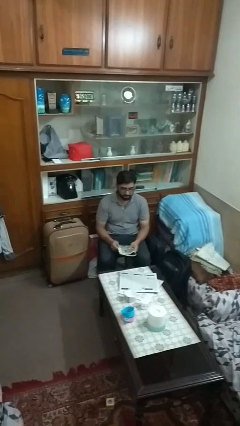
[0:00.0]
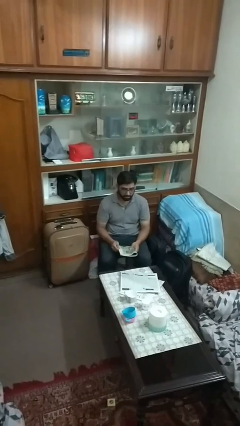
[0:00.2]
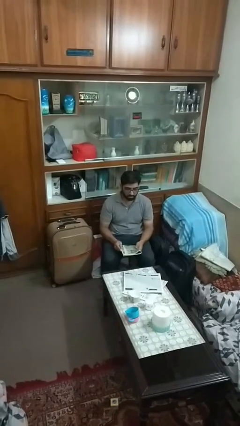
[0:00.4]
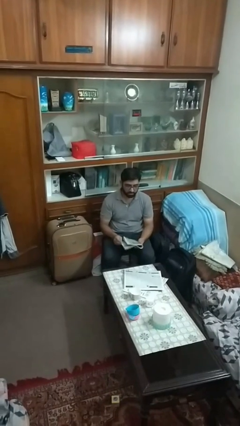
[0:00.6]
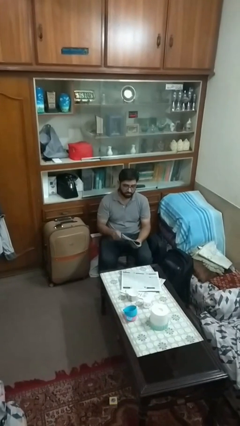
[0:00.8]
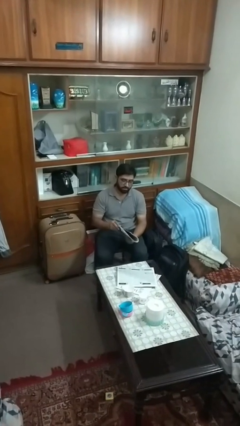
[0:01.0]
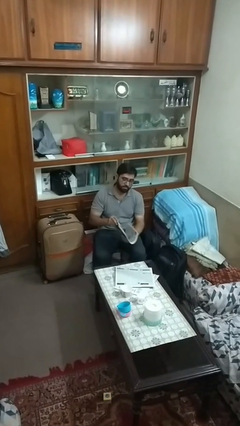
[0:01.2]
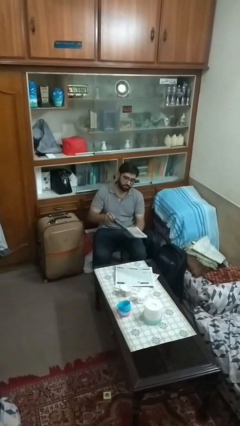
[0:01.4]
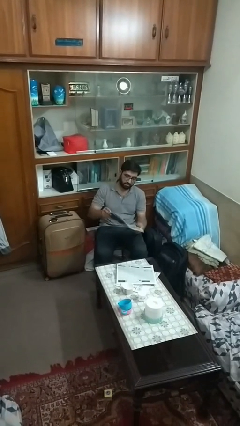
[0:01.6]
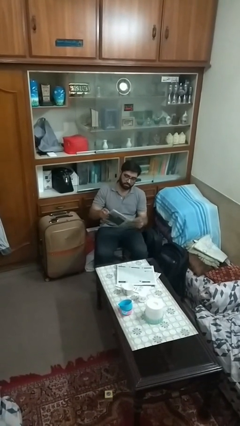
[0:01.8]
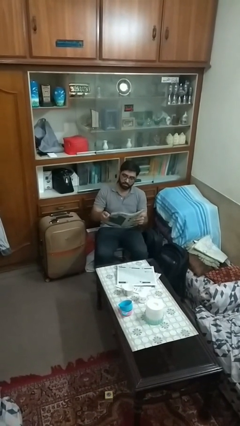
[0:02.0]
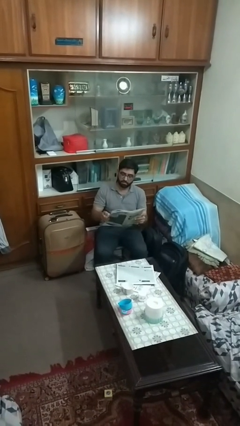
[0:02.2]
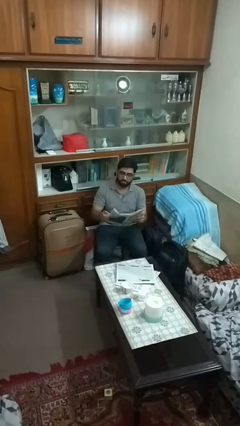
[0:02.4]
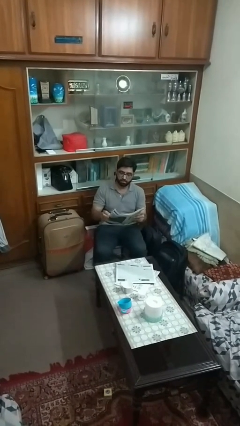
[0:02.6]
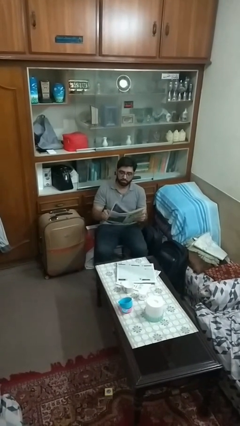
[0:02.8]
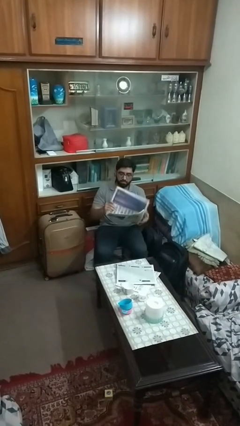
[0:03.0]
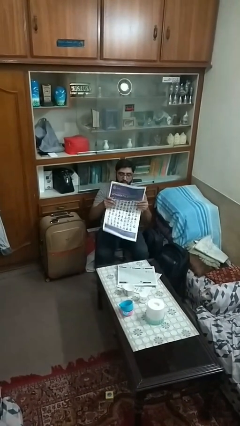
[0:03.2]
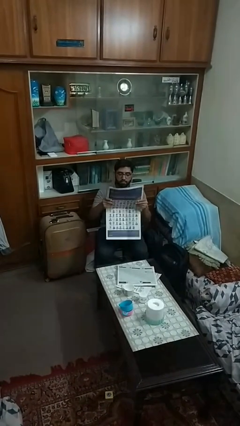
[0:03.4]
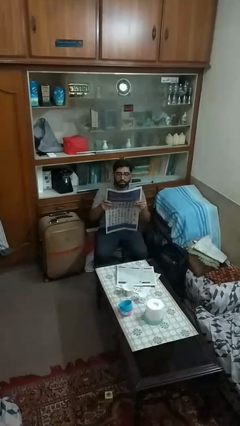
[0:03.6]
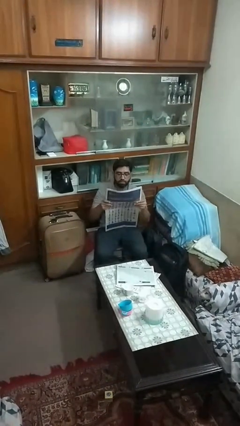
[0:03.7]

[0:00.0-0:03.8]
person reads newspaper

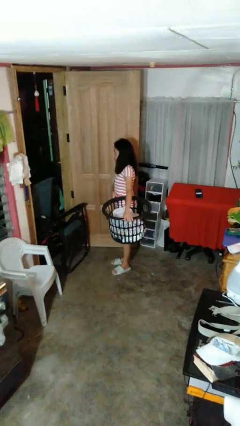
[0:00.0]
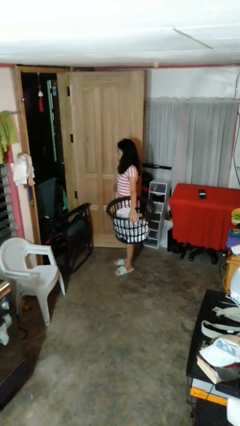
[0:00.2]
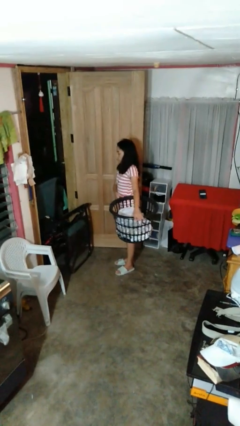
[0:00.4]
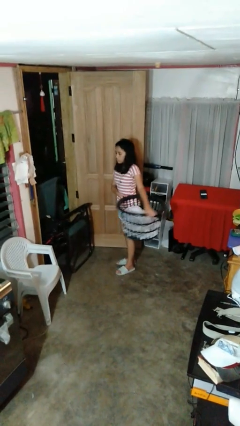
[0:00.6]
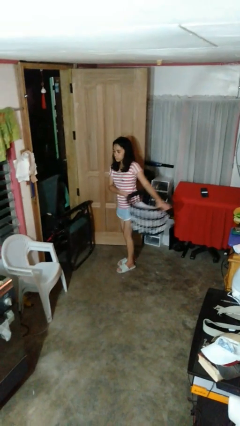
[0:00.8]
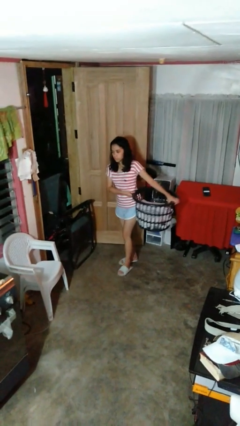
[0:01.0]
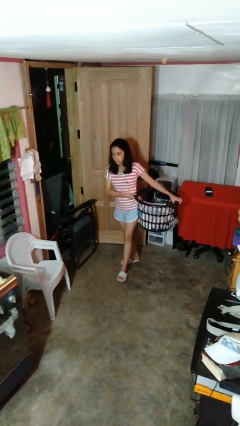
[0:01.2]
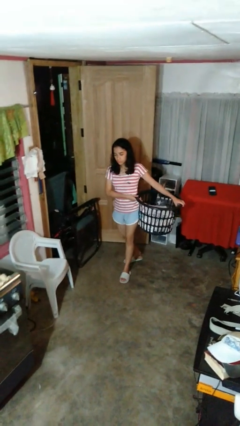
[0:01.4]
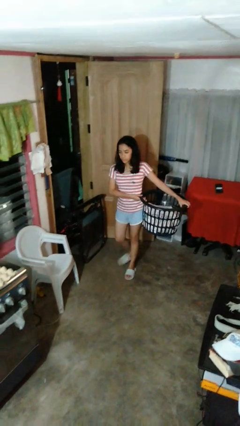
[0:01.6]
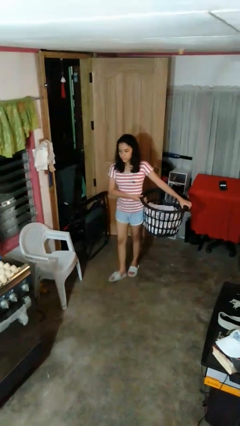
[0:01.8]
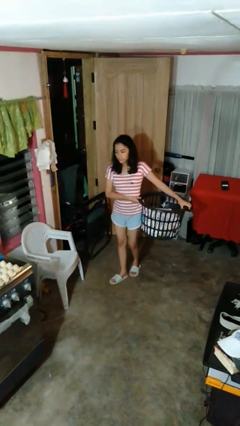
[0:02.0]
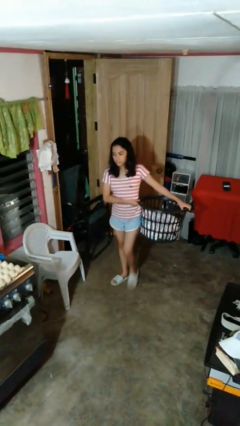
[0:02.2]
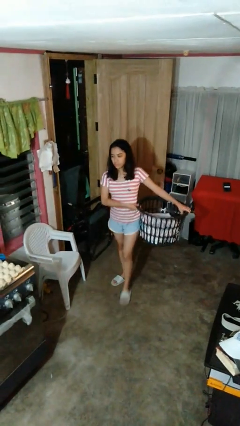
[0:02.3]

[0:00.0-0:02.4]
person carries laundry basket

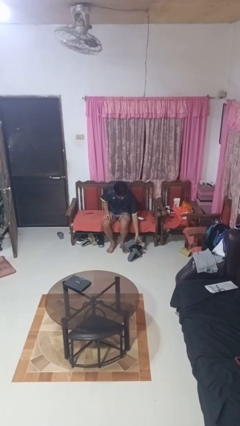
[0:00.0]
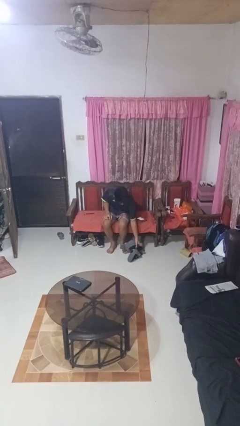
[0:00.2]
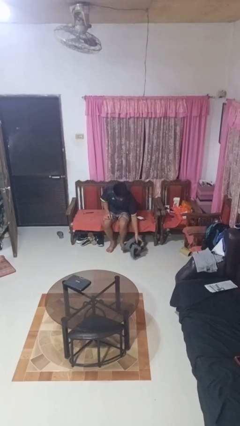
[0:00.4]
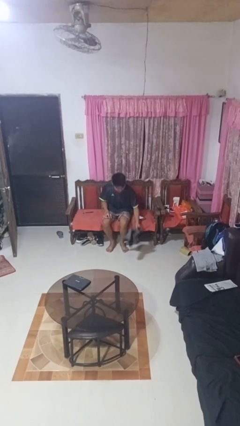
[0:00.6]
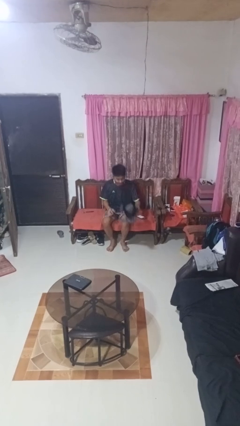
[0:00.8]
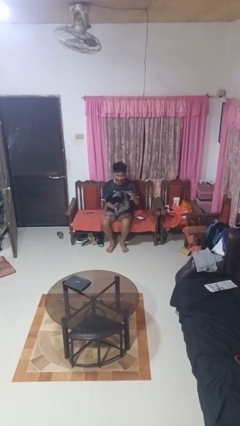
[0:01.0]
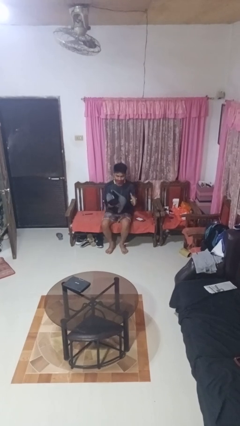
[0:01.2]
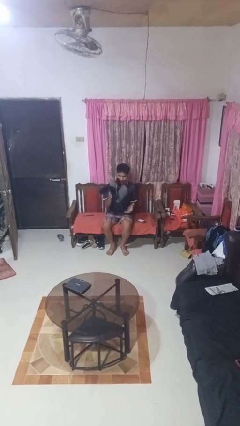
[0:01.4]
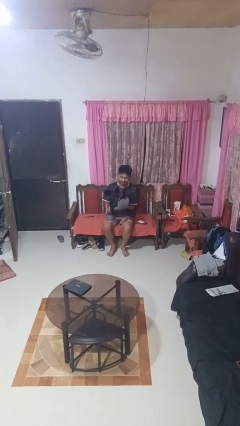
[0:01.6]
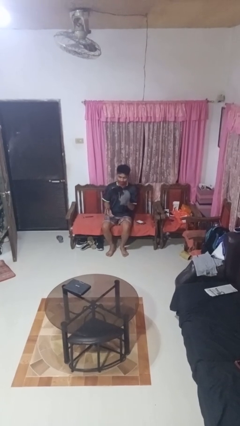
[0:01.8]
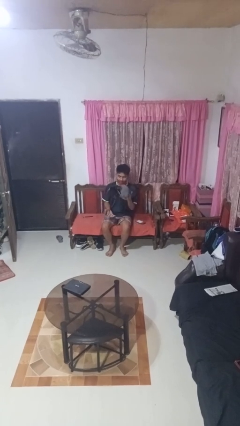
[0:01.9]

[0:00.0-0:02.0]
person picks up object from floor

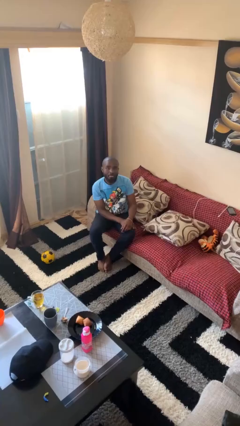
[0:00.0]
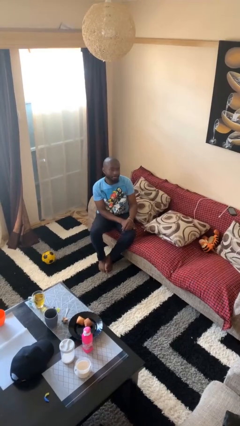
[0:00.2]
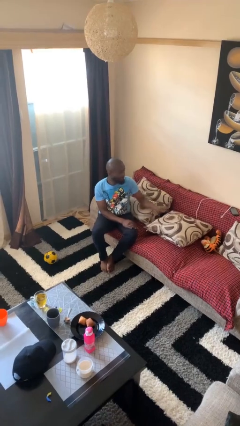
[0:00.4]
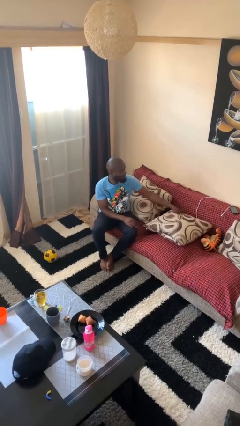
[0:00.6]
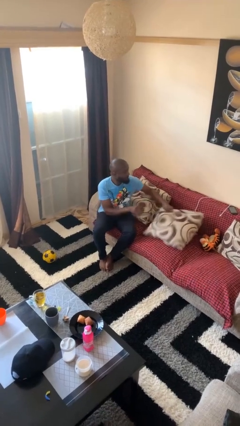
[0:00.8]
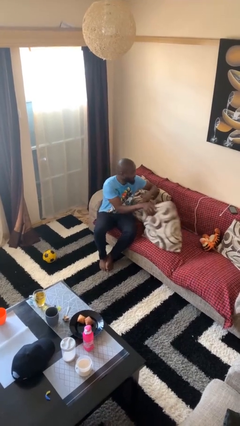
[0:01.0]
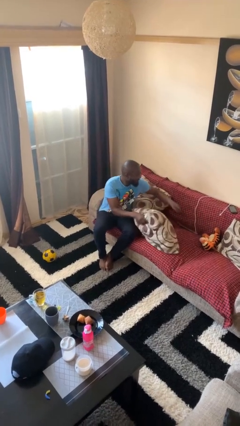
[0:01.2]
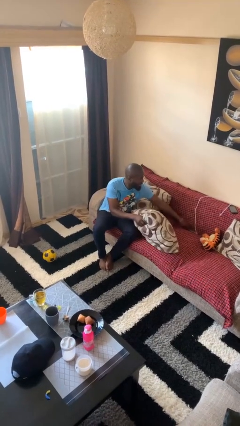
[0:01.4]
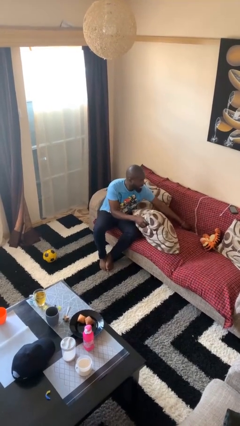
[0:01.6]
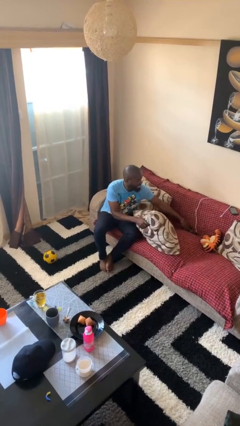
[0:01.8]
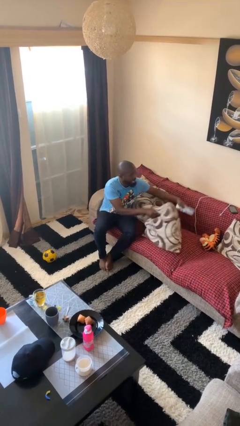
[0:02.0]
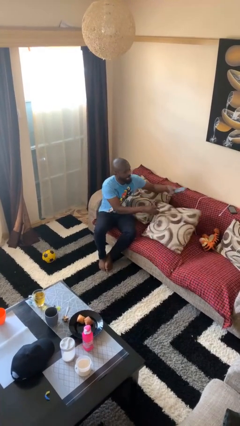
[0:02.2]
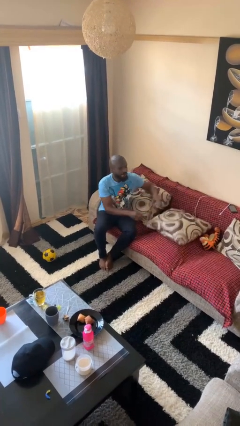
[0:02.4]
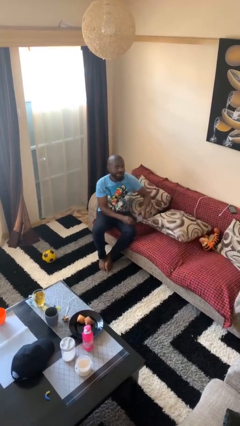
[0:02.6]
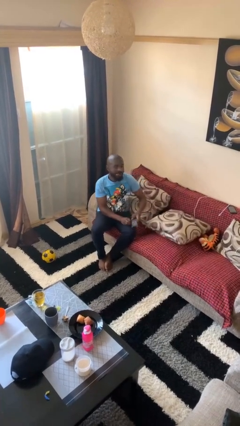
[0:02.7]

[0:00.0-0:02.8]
person searches in couch

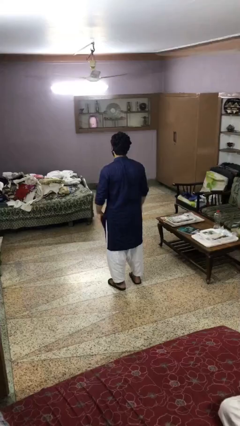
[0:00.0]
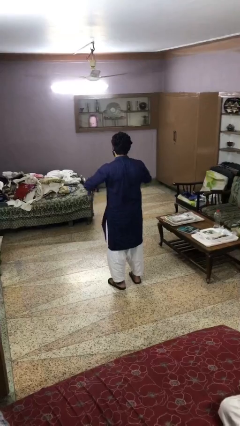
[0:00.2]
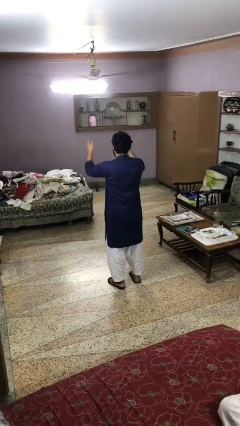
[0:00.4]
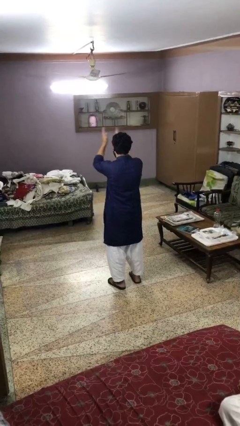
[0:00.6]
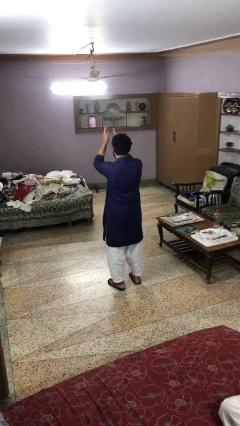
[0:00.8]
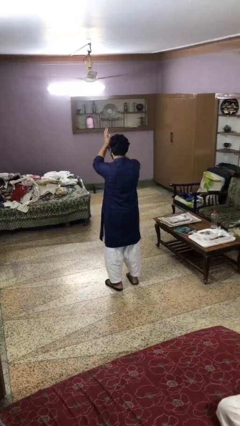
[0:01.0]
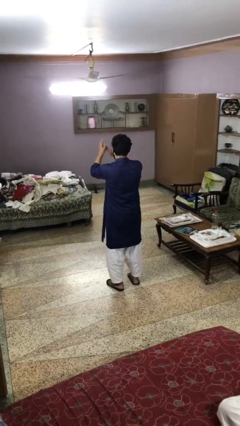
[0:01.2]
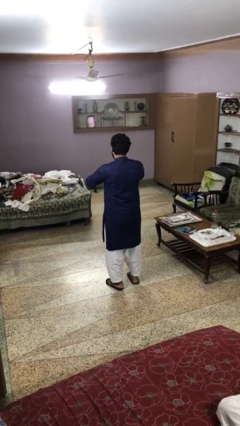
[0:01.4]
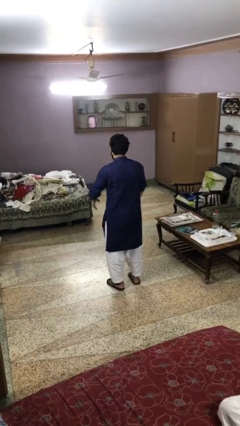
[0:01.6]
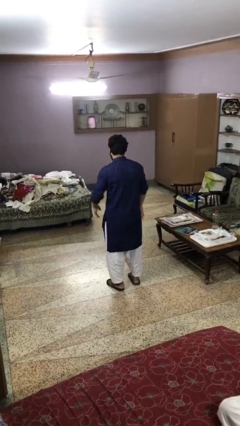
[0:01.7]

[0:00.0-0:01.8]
person claps hands

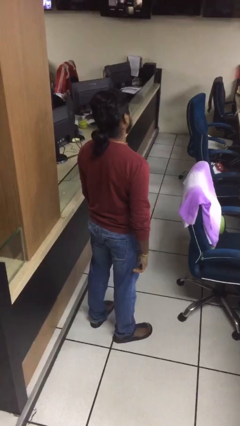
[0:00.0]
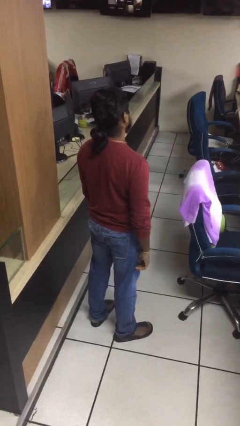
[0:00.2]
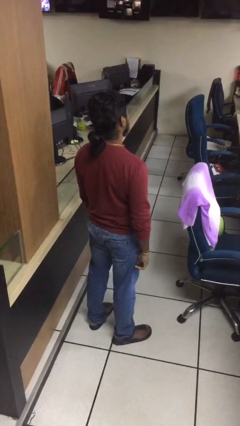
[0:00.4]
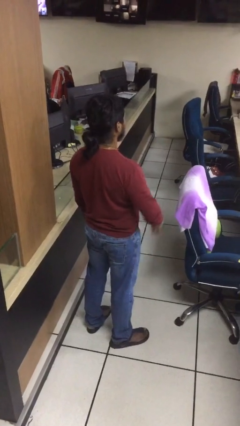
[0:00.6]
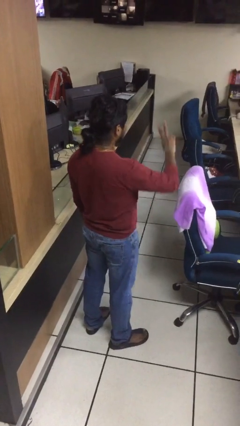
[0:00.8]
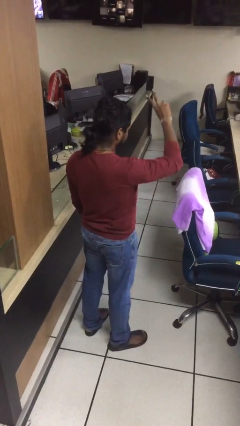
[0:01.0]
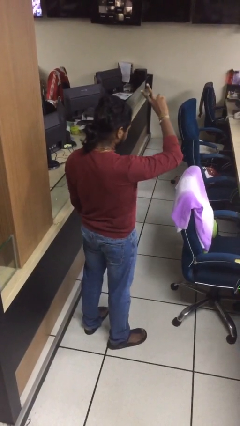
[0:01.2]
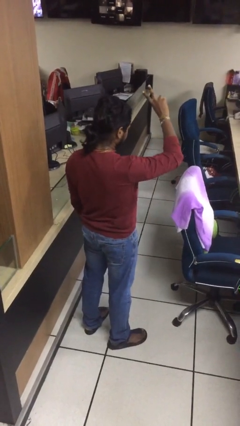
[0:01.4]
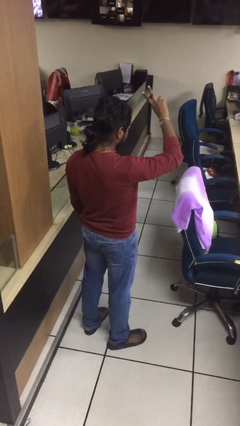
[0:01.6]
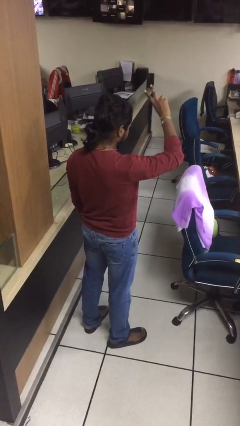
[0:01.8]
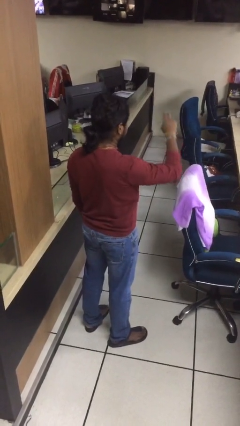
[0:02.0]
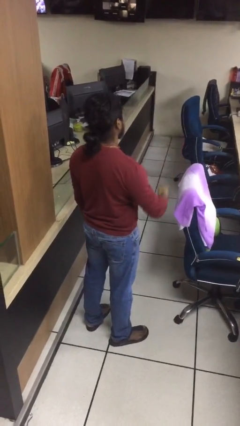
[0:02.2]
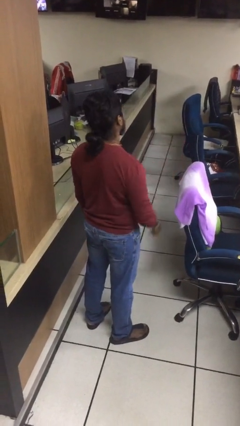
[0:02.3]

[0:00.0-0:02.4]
person gestures peace

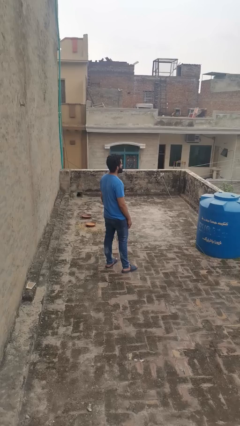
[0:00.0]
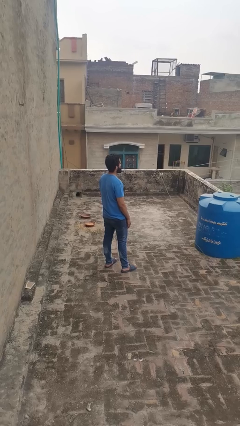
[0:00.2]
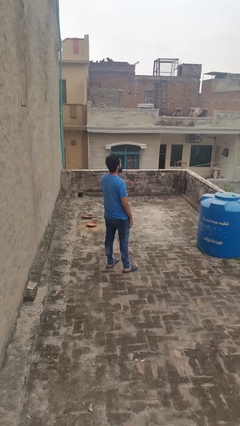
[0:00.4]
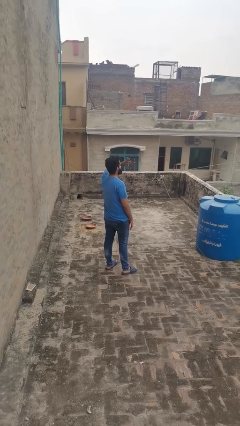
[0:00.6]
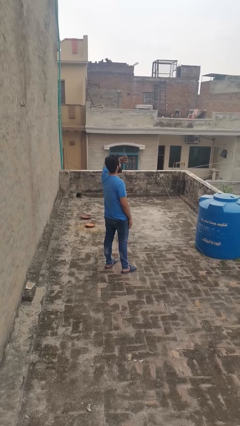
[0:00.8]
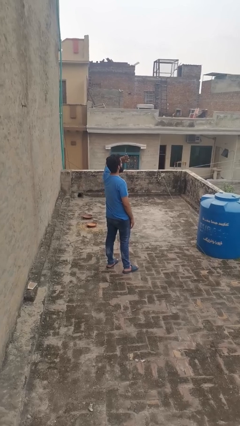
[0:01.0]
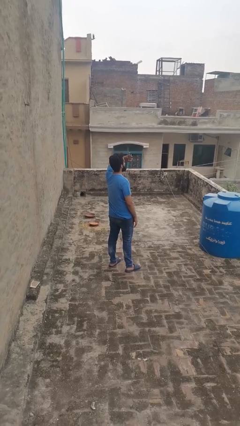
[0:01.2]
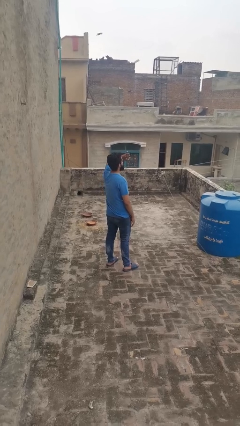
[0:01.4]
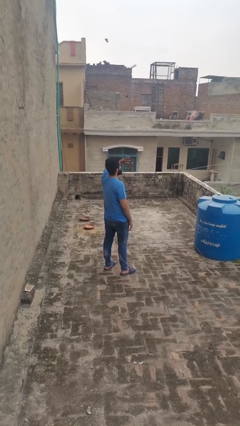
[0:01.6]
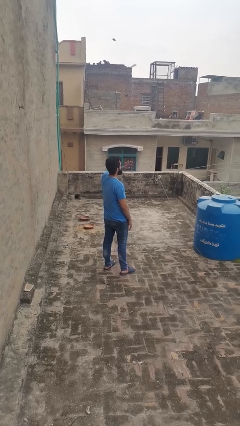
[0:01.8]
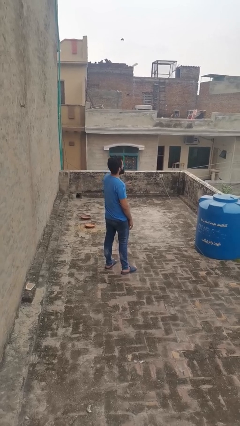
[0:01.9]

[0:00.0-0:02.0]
person shades eyes
